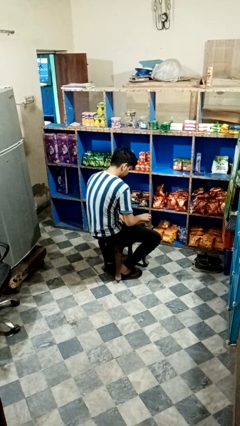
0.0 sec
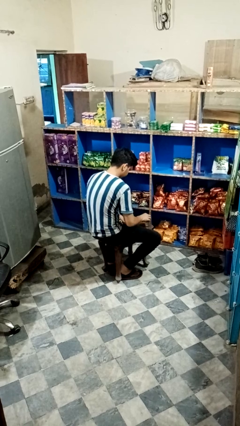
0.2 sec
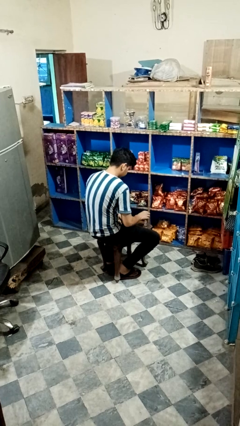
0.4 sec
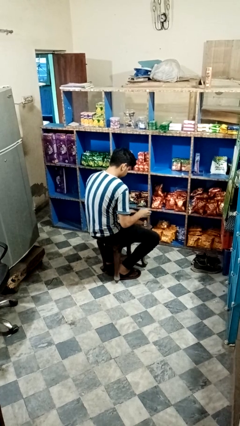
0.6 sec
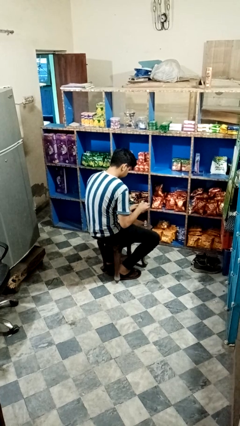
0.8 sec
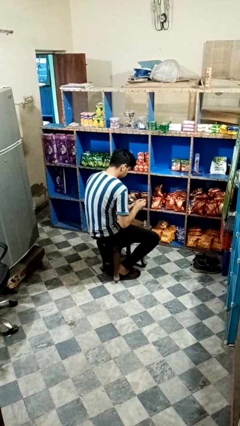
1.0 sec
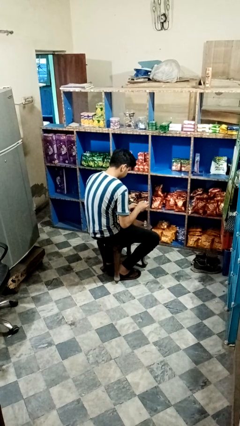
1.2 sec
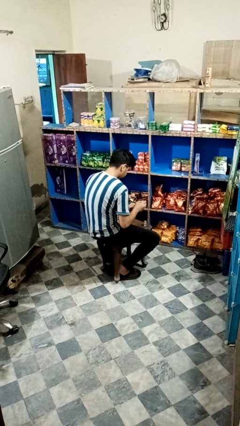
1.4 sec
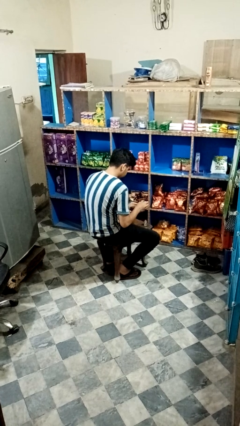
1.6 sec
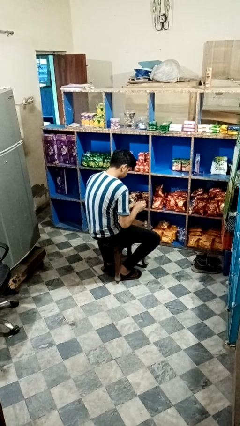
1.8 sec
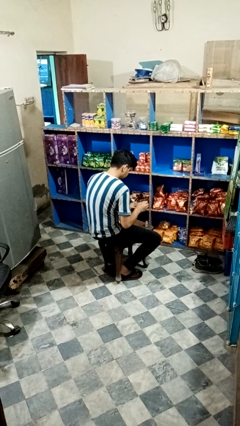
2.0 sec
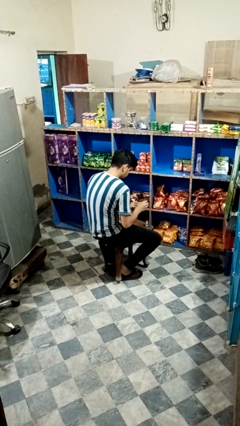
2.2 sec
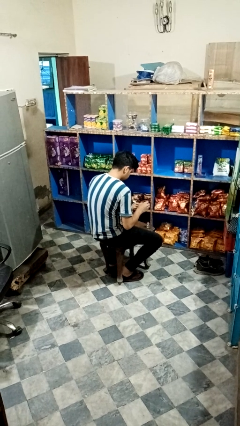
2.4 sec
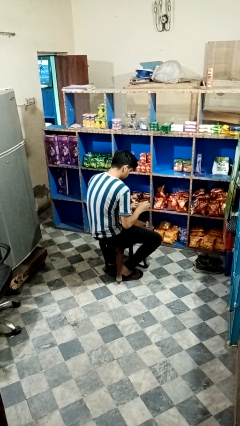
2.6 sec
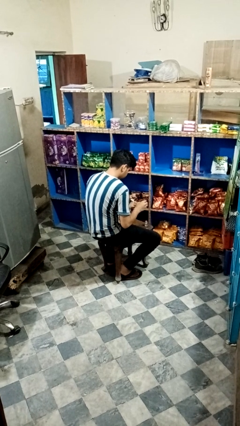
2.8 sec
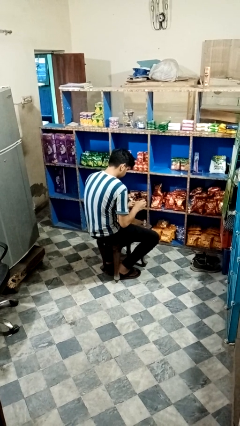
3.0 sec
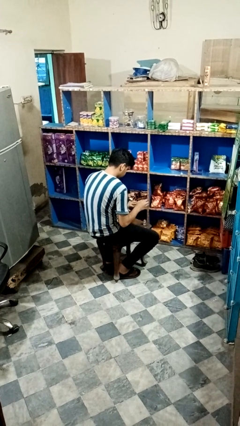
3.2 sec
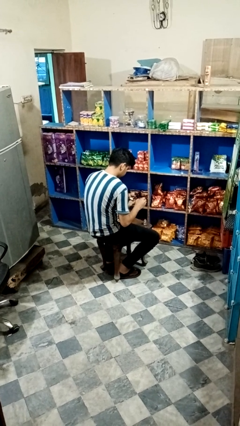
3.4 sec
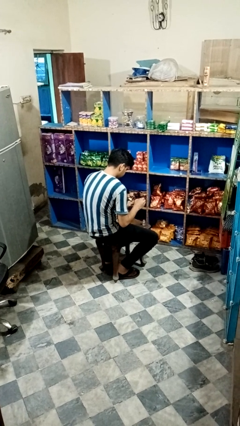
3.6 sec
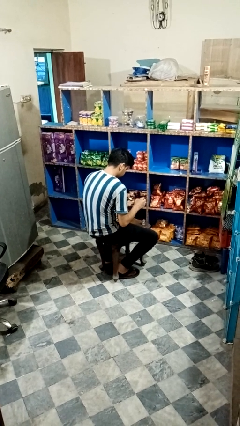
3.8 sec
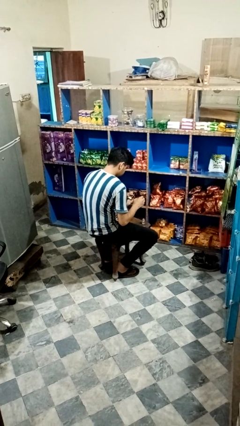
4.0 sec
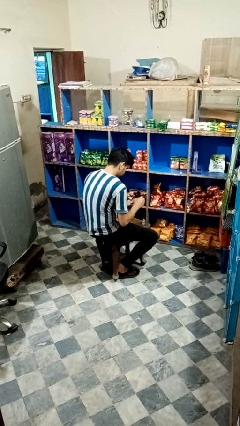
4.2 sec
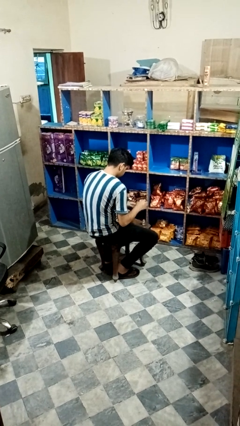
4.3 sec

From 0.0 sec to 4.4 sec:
person paints fingernails

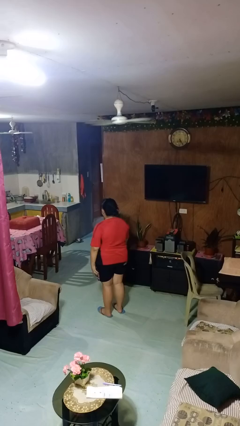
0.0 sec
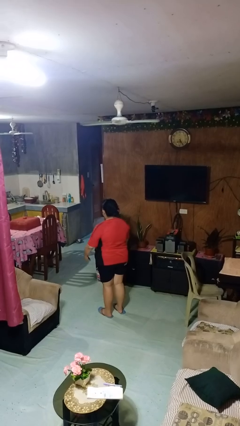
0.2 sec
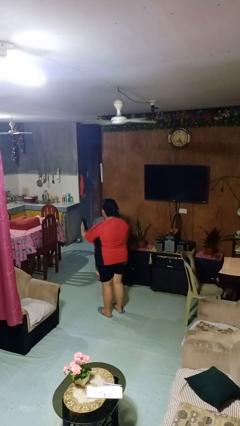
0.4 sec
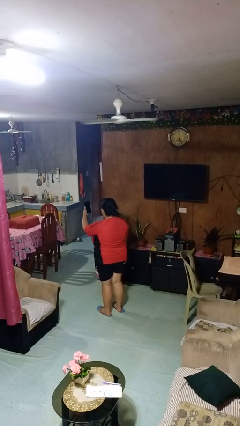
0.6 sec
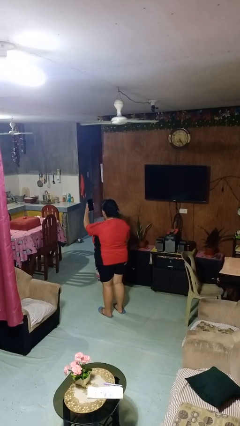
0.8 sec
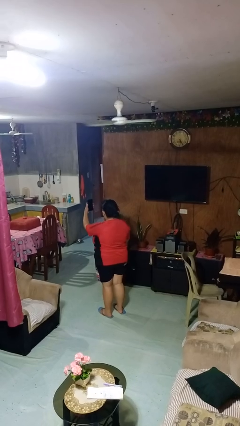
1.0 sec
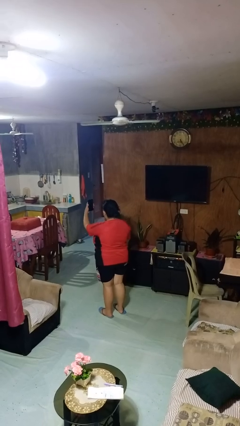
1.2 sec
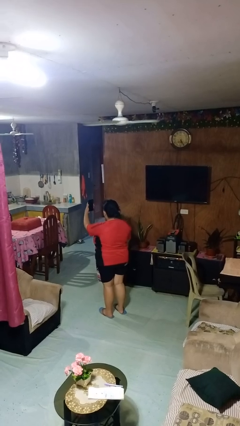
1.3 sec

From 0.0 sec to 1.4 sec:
person takes selfie

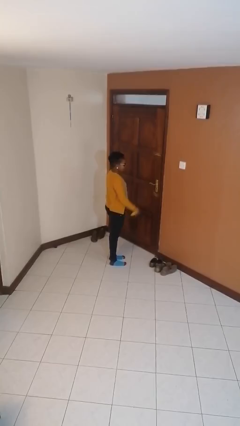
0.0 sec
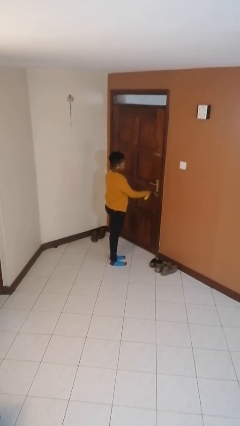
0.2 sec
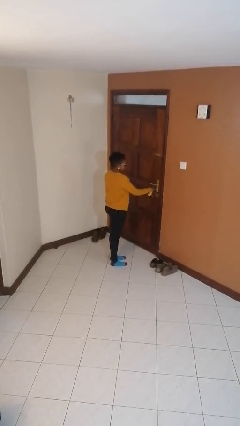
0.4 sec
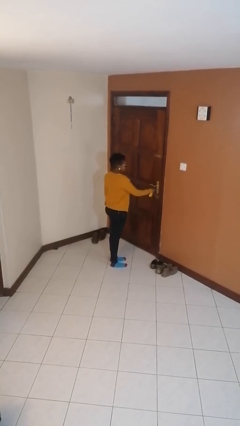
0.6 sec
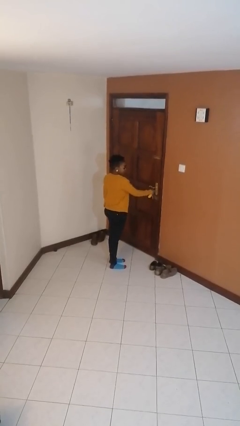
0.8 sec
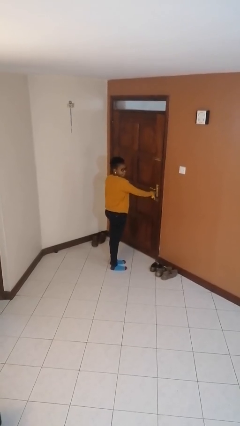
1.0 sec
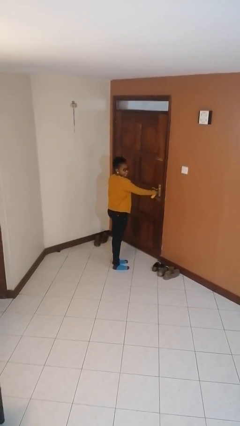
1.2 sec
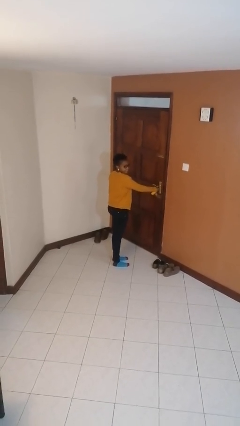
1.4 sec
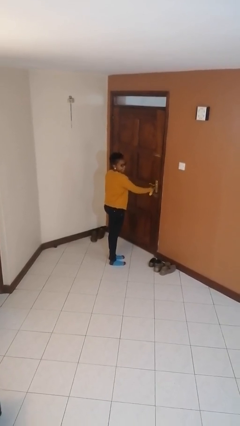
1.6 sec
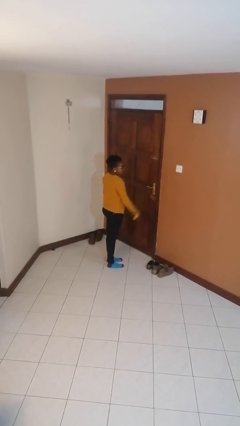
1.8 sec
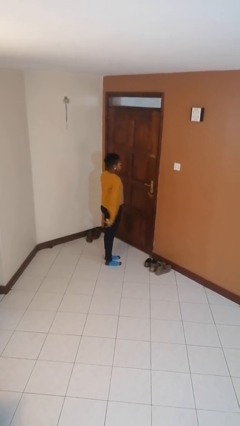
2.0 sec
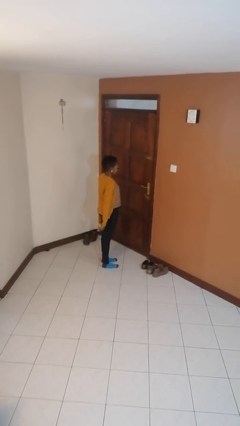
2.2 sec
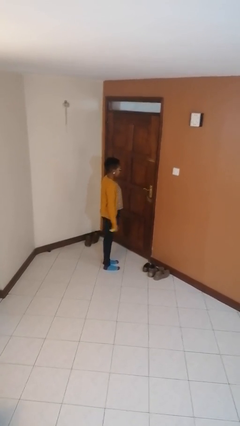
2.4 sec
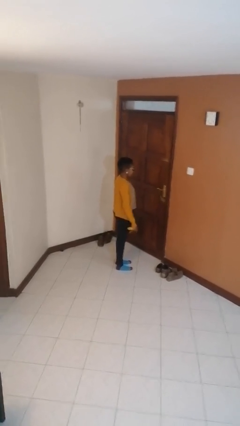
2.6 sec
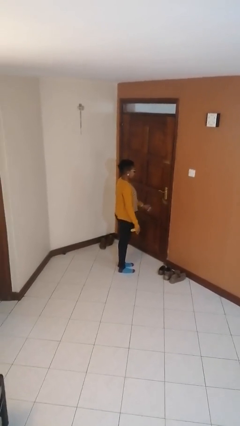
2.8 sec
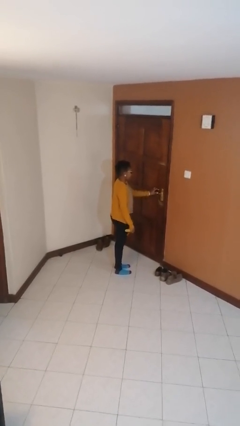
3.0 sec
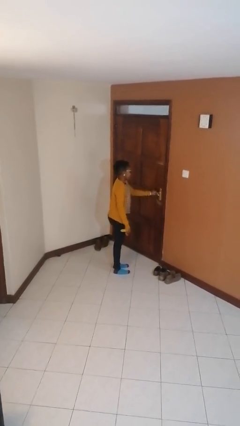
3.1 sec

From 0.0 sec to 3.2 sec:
person unlocks door with keys

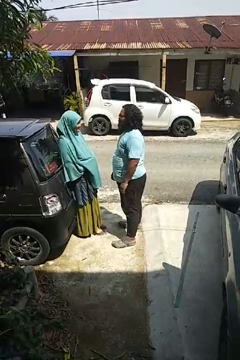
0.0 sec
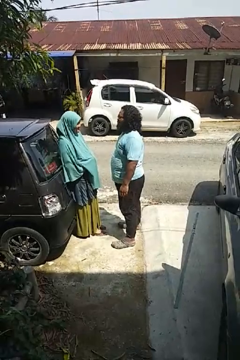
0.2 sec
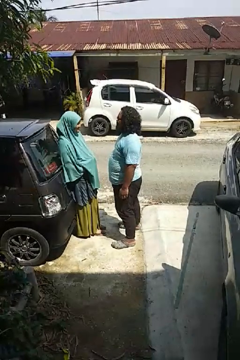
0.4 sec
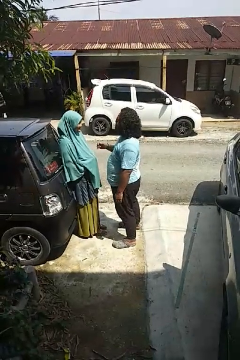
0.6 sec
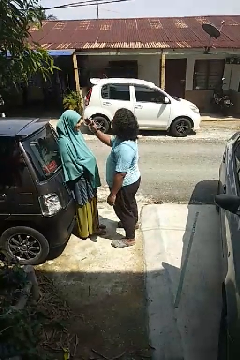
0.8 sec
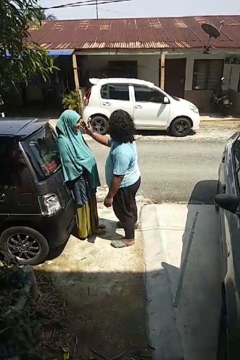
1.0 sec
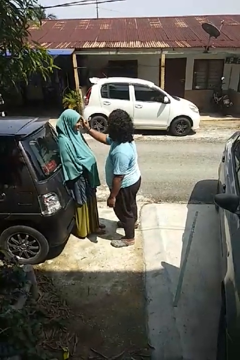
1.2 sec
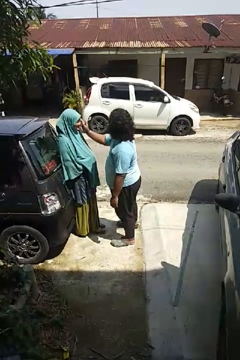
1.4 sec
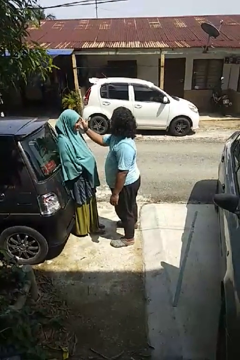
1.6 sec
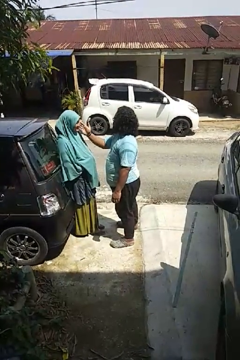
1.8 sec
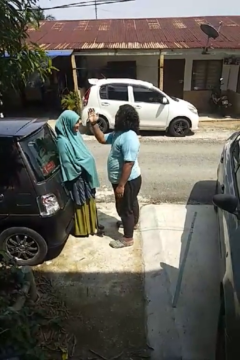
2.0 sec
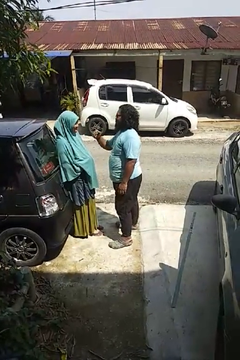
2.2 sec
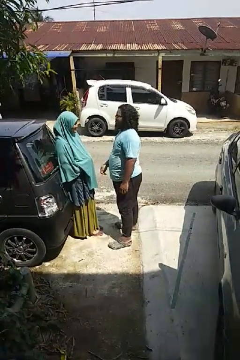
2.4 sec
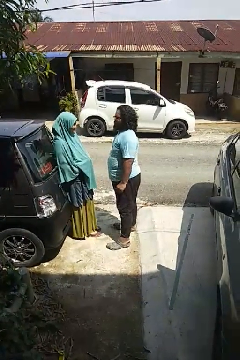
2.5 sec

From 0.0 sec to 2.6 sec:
person touches face of person

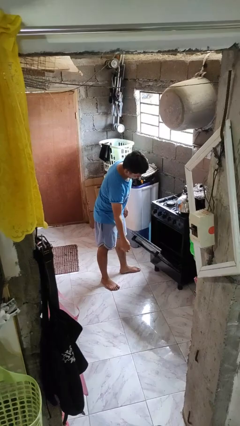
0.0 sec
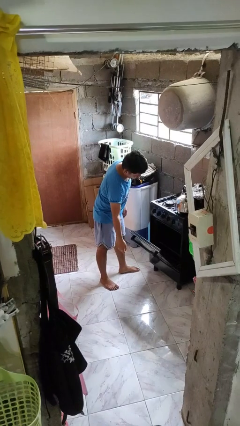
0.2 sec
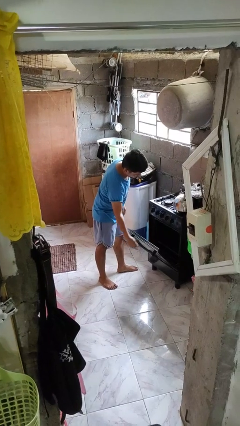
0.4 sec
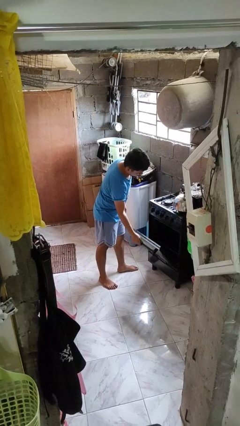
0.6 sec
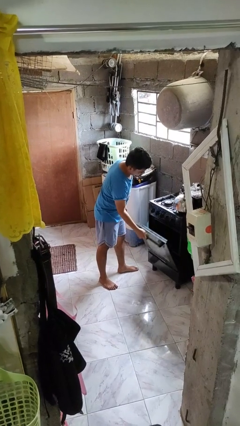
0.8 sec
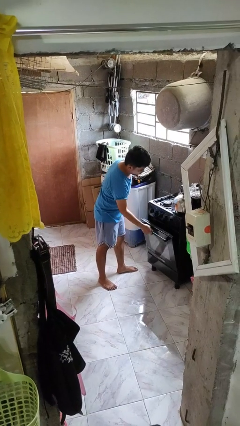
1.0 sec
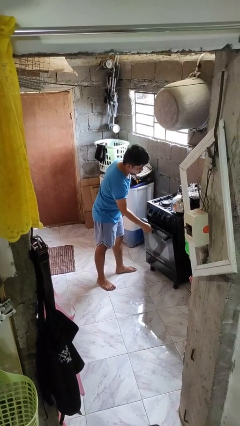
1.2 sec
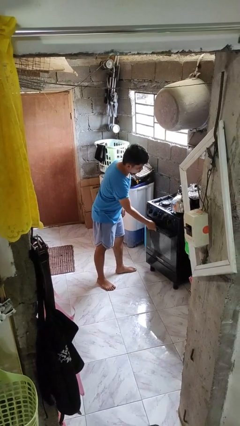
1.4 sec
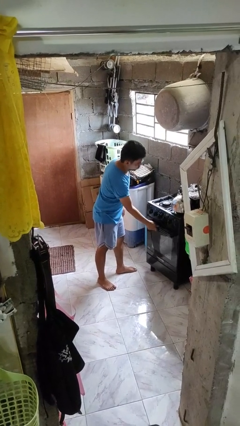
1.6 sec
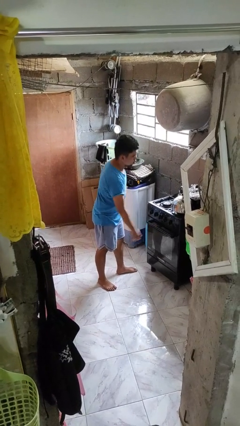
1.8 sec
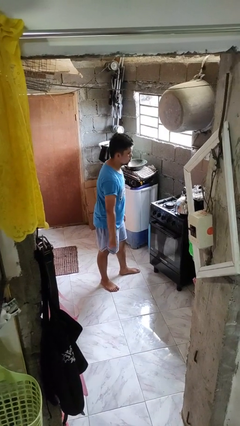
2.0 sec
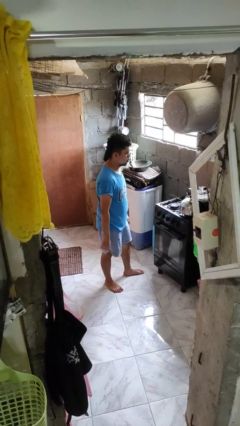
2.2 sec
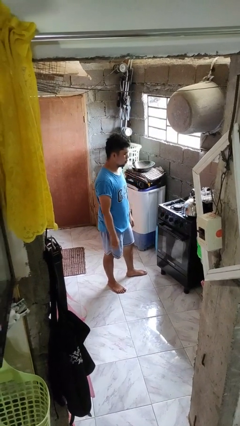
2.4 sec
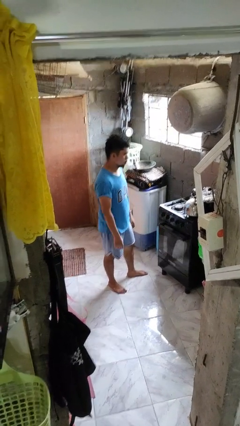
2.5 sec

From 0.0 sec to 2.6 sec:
person closes oven door

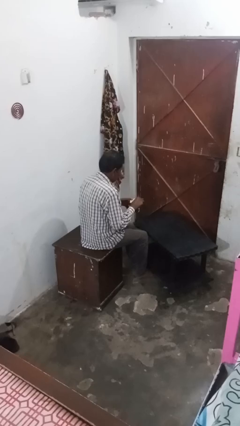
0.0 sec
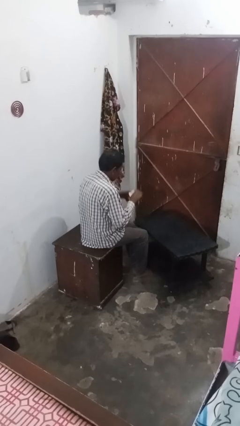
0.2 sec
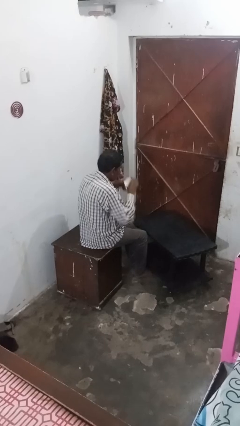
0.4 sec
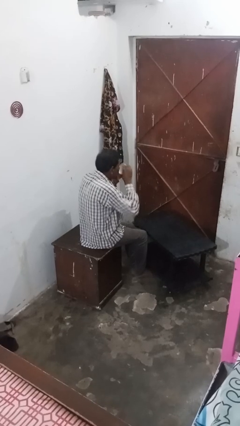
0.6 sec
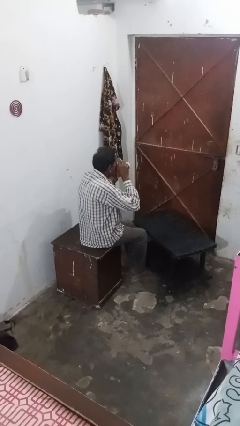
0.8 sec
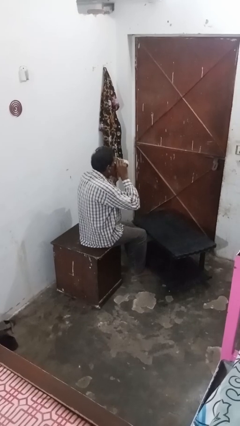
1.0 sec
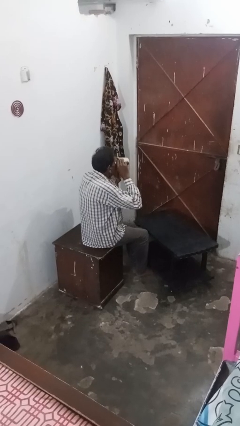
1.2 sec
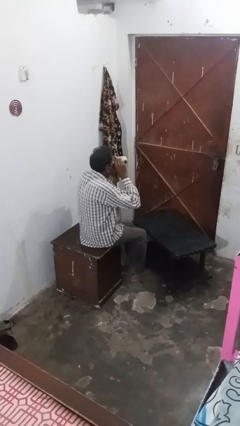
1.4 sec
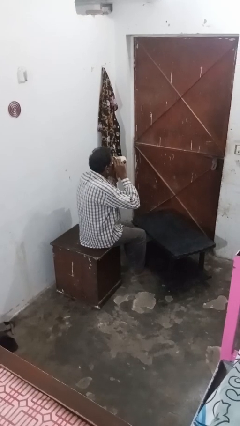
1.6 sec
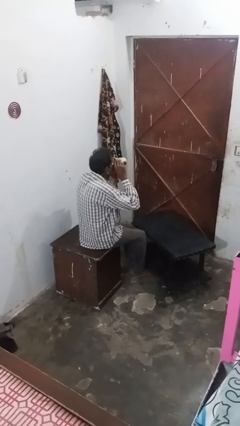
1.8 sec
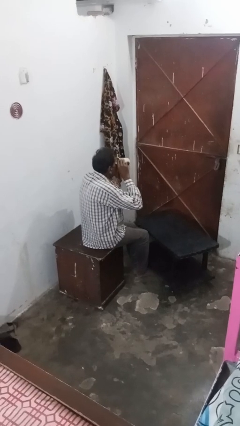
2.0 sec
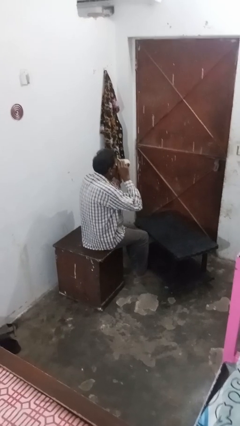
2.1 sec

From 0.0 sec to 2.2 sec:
person drinks from mug

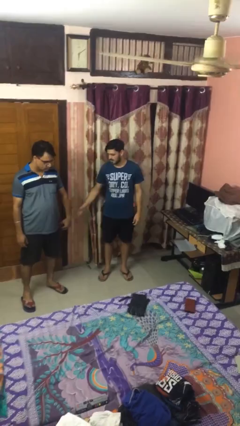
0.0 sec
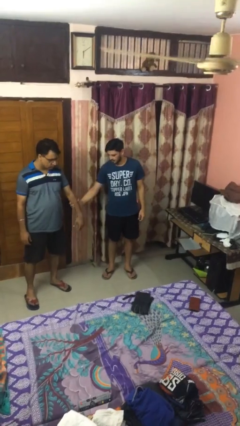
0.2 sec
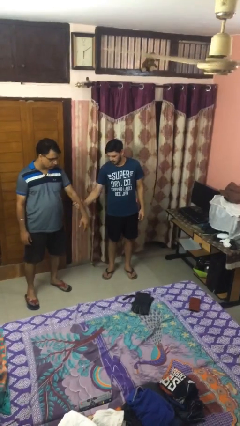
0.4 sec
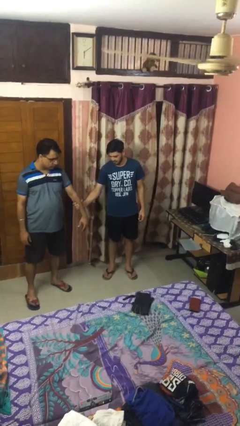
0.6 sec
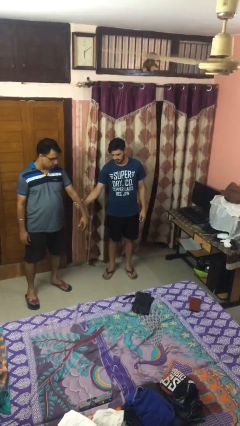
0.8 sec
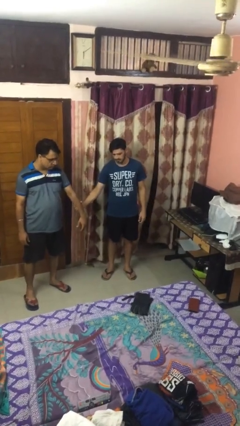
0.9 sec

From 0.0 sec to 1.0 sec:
person grabs person by forearm
